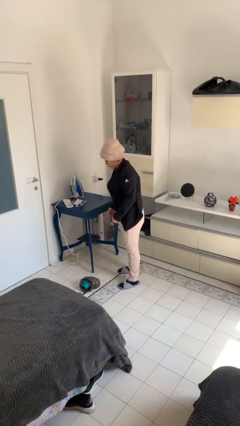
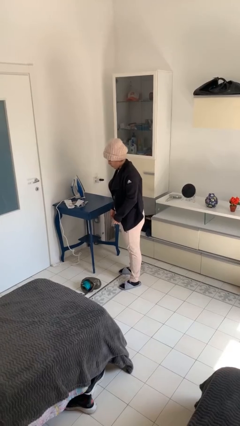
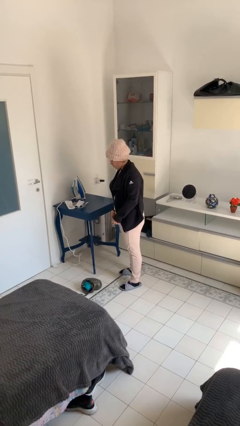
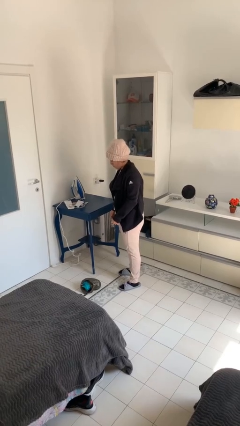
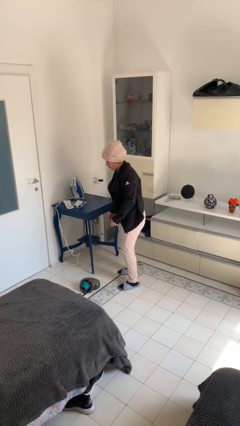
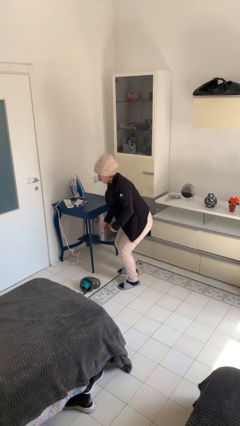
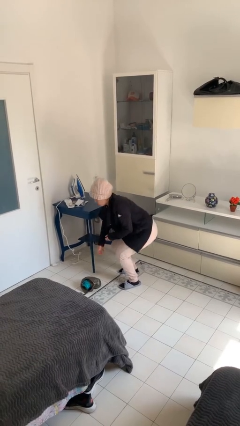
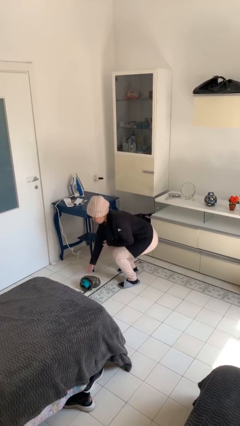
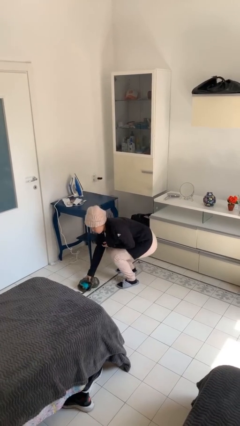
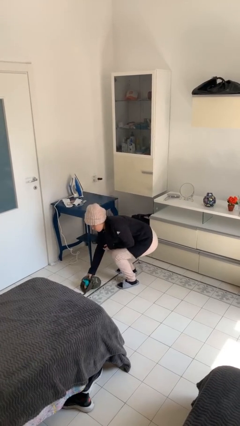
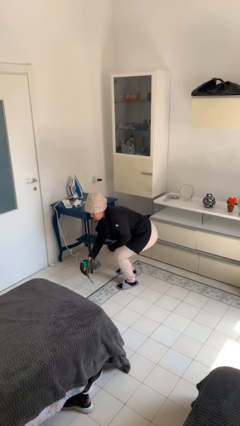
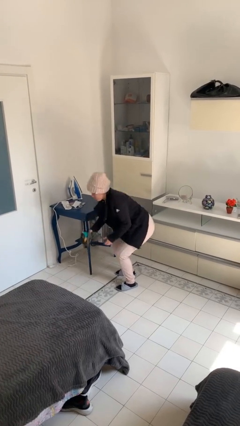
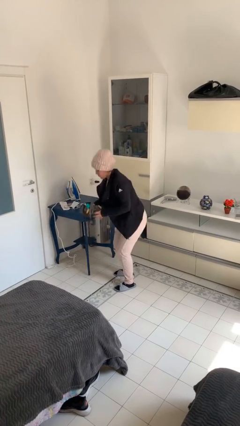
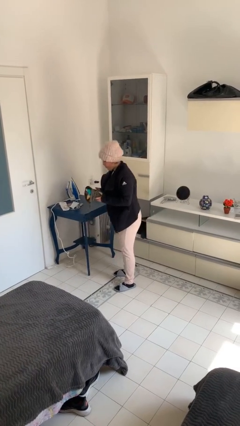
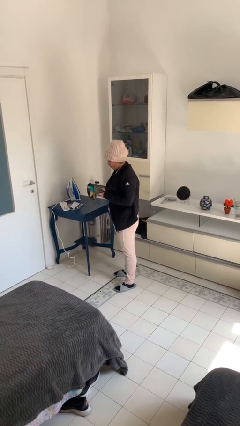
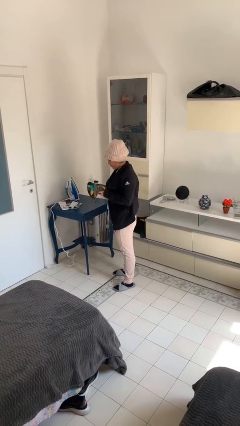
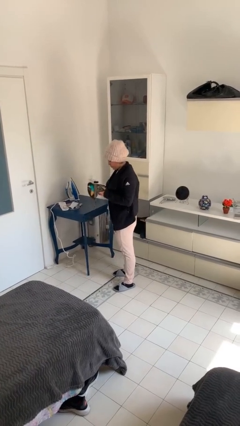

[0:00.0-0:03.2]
person picks up object from floor

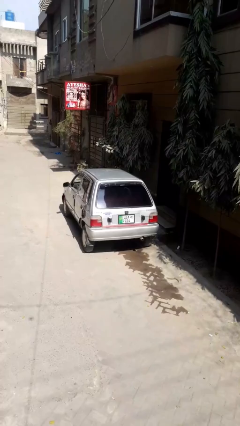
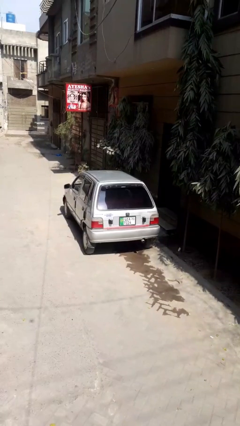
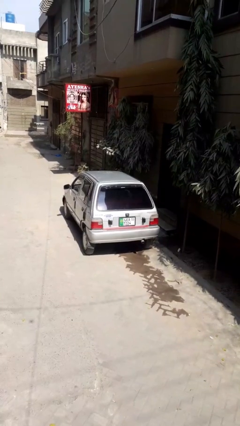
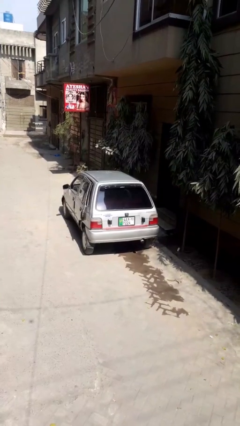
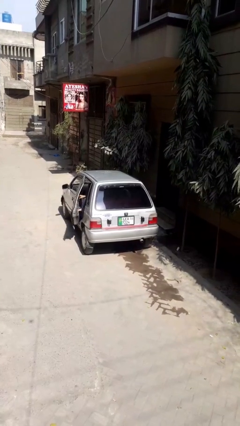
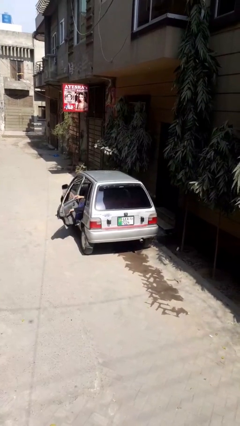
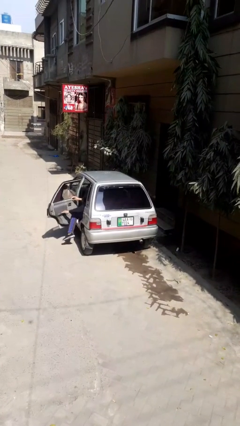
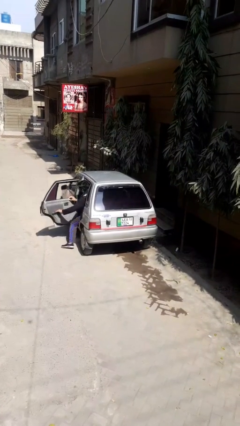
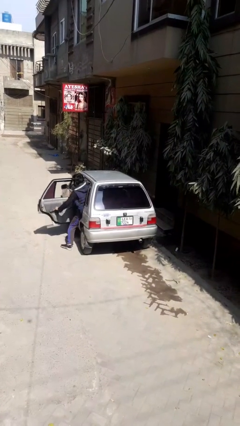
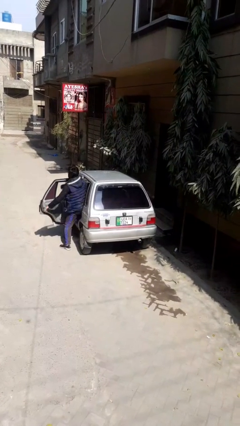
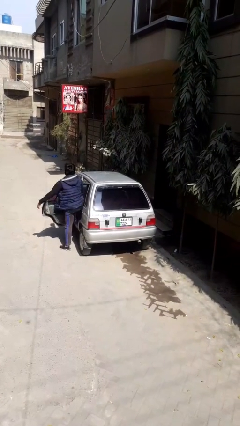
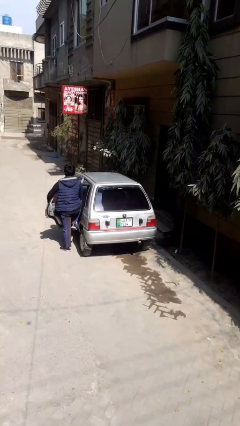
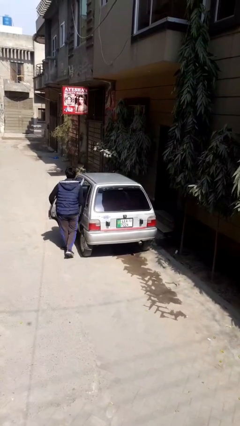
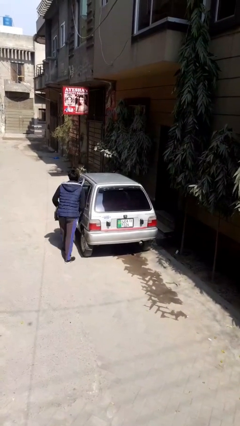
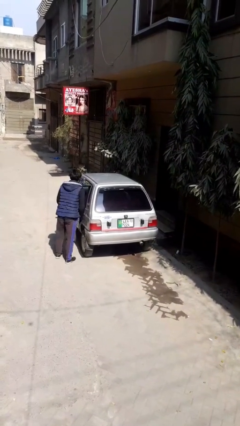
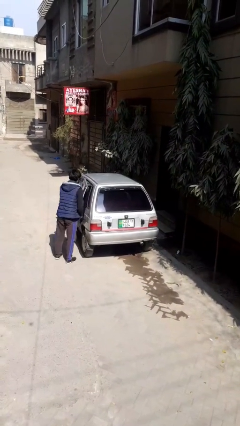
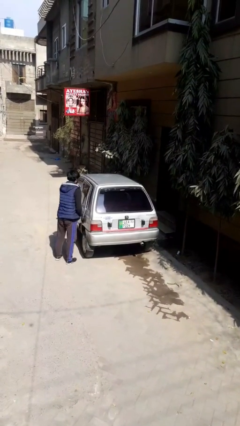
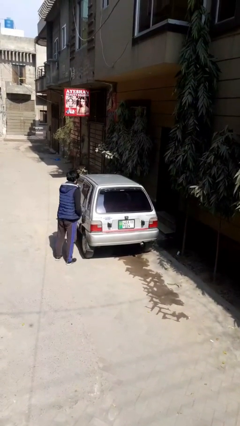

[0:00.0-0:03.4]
car drops off person

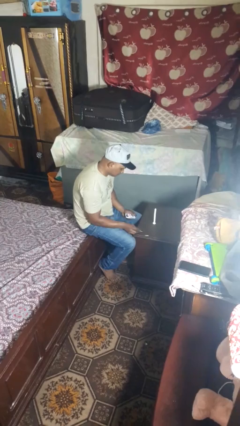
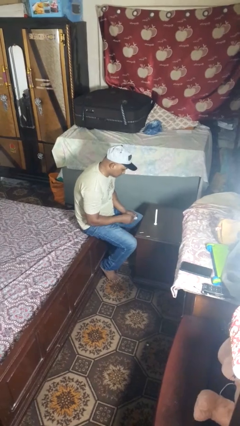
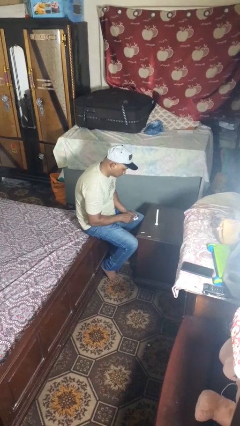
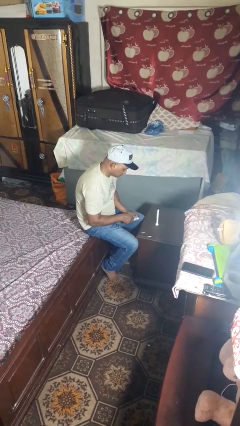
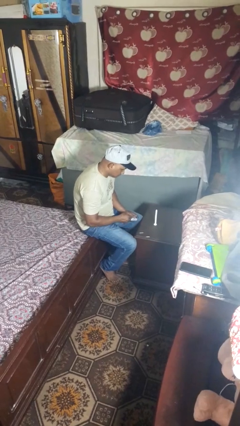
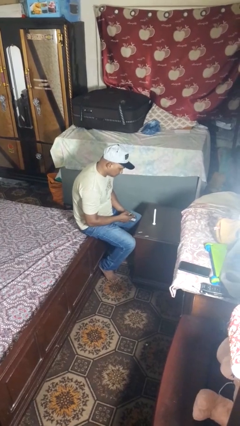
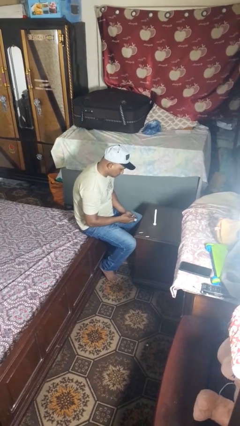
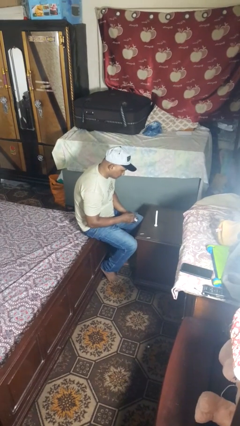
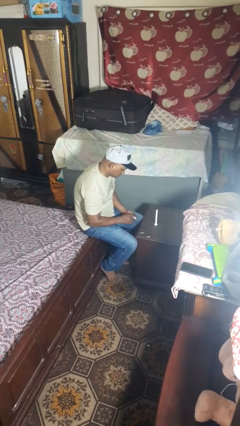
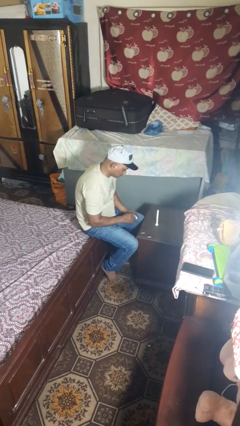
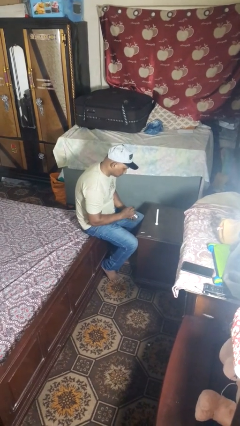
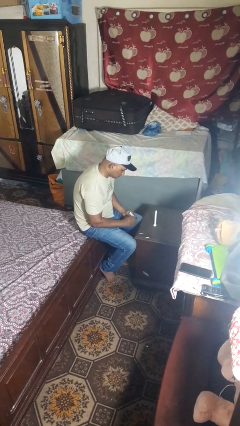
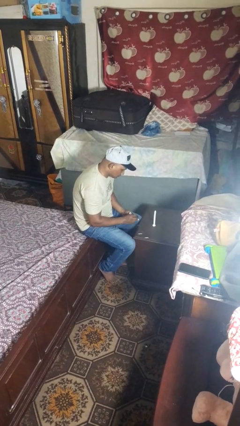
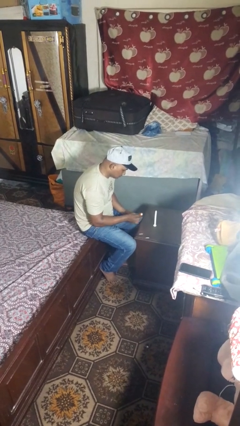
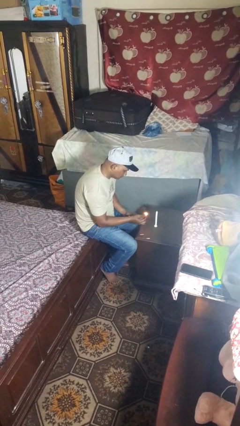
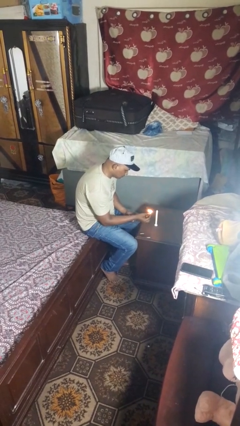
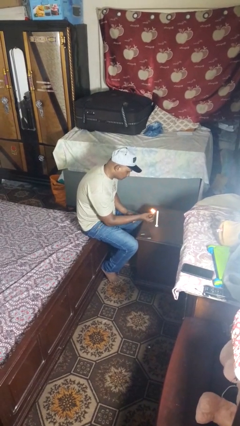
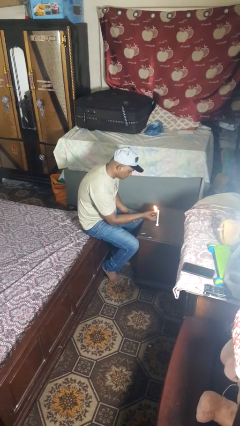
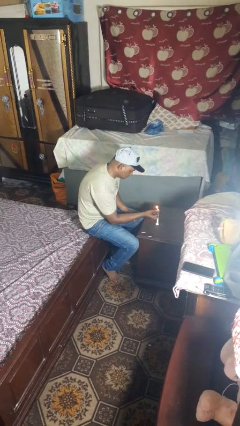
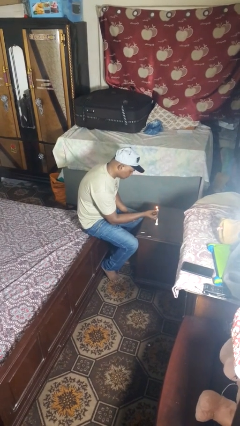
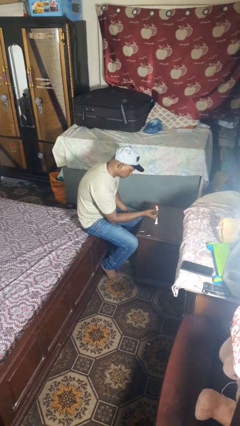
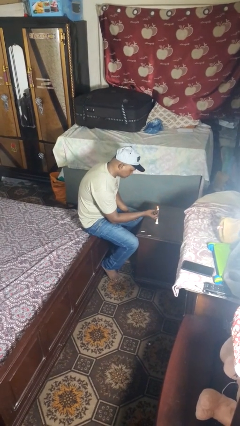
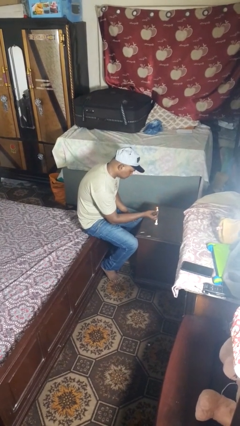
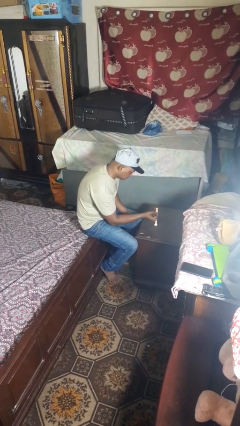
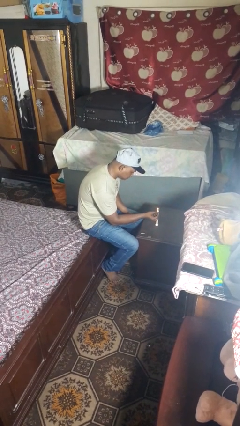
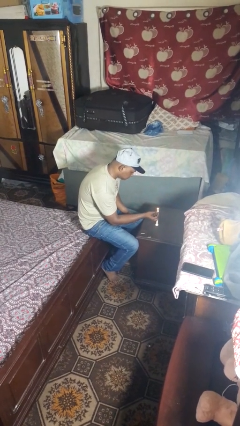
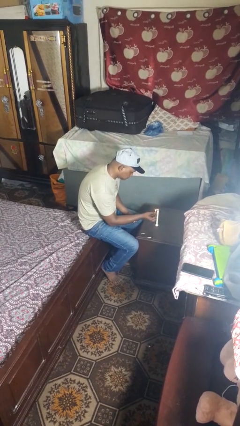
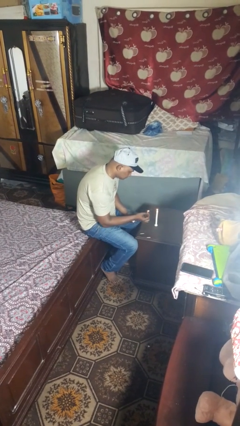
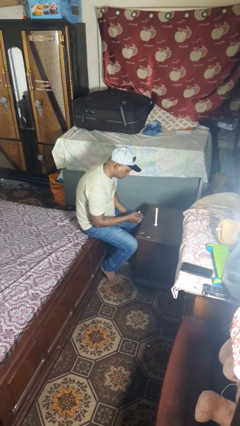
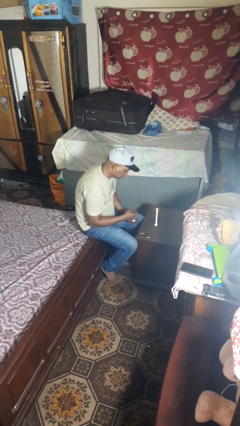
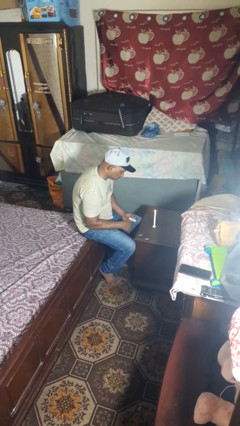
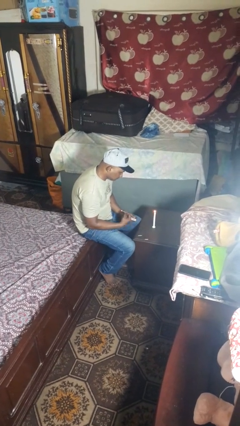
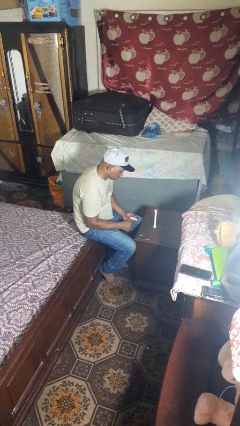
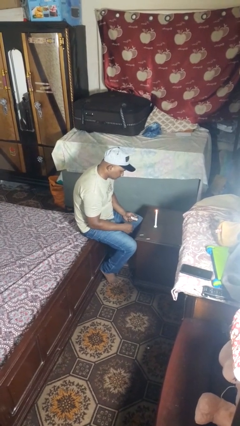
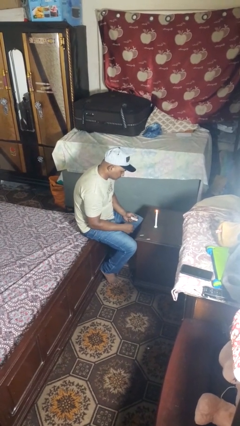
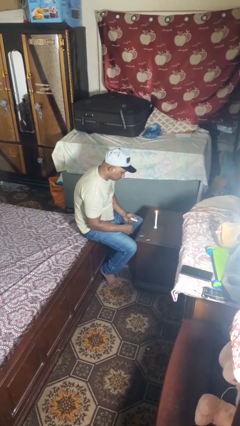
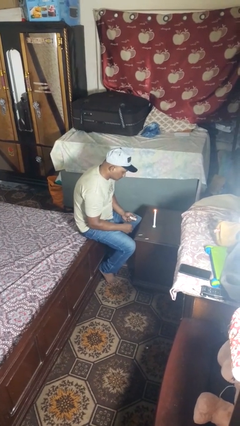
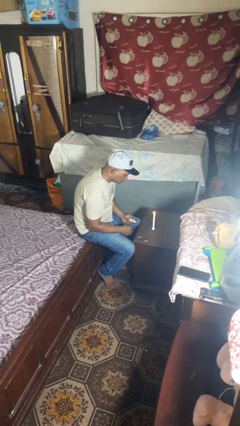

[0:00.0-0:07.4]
person lights candle

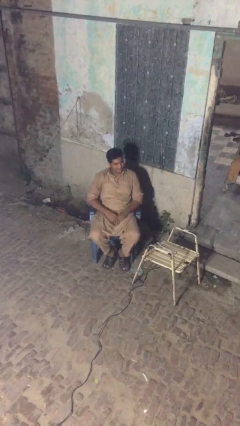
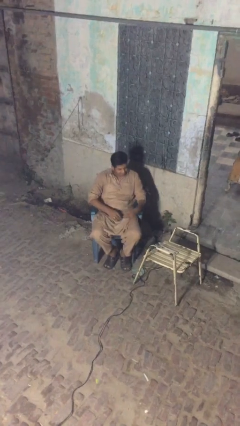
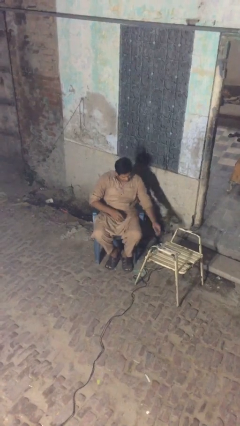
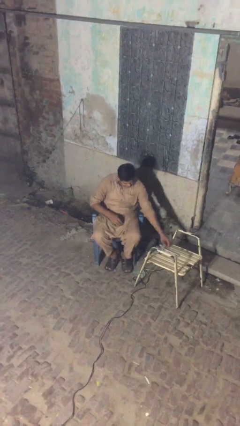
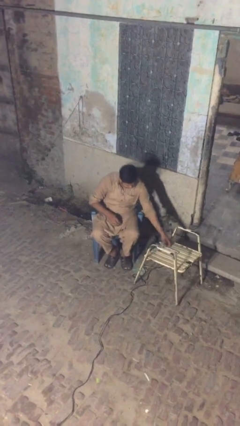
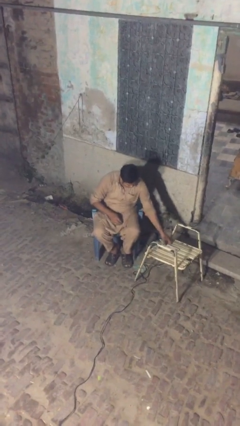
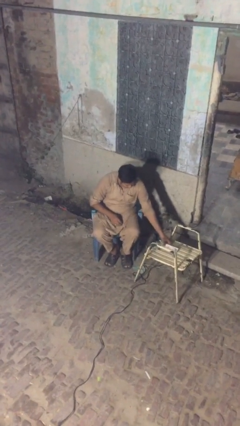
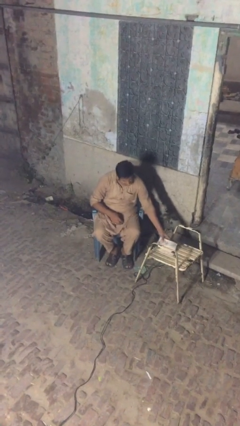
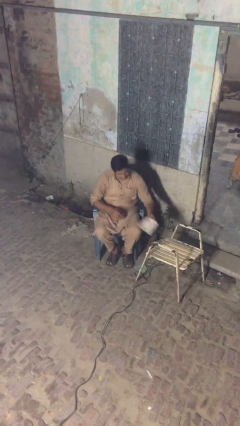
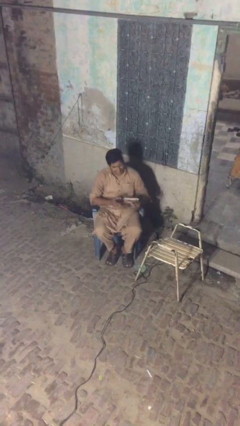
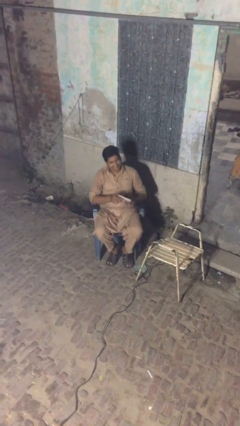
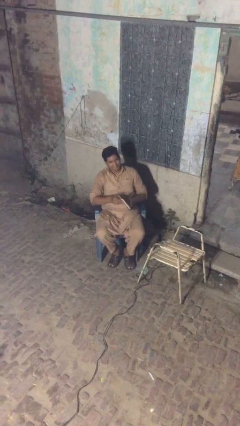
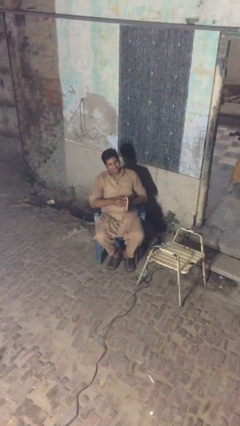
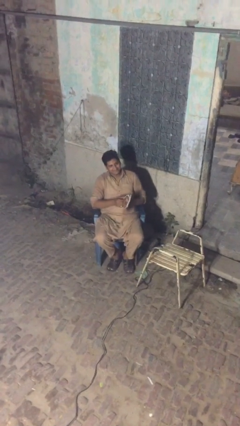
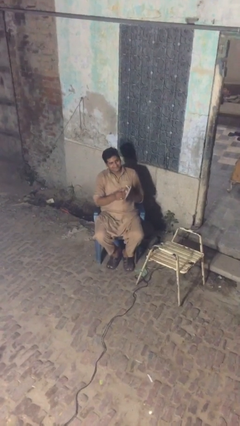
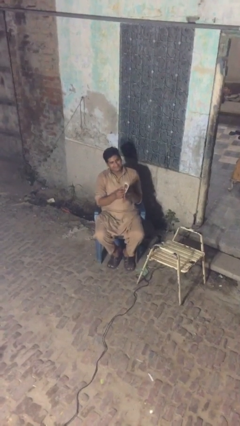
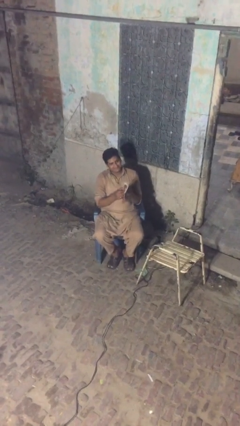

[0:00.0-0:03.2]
person picks up object from table

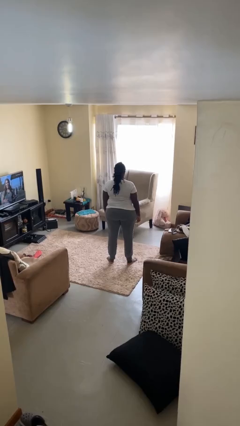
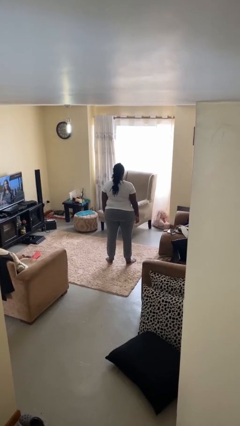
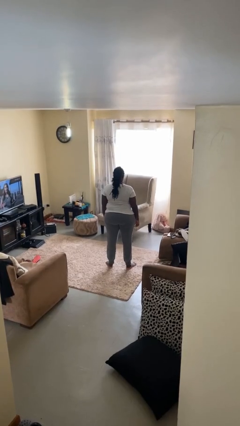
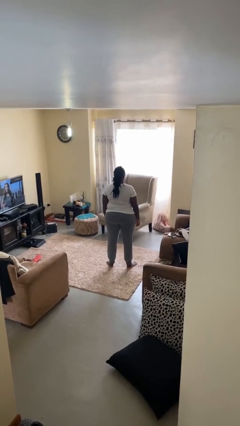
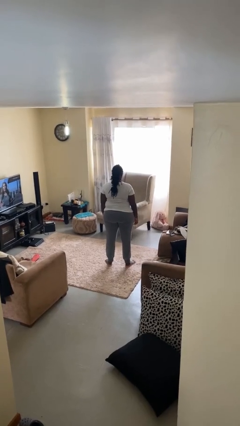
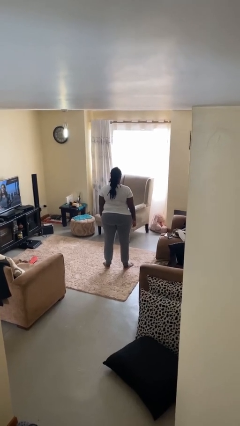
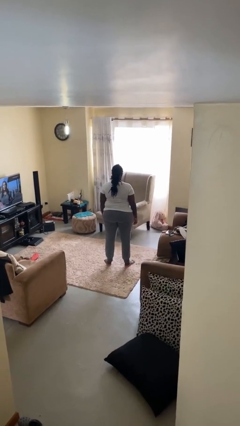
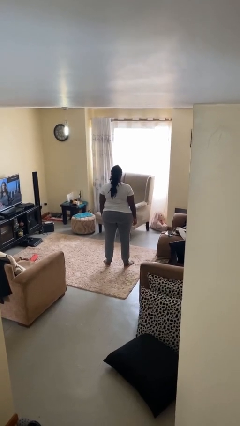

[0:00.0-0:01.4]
person punches
